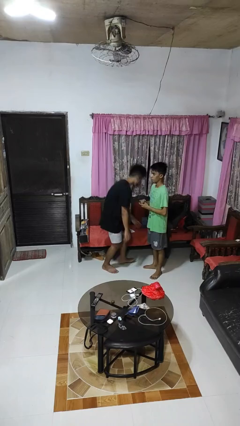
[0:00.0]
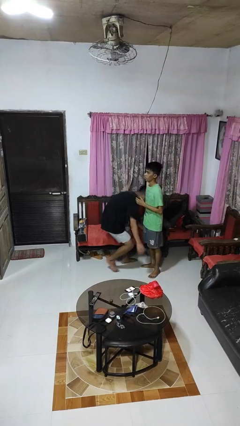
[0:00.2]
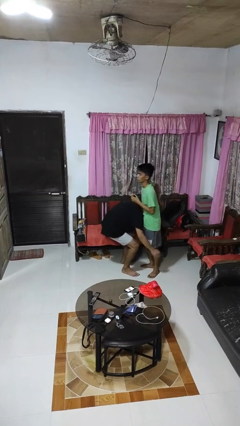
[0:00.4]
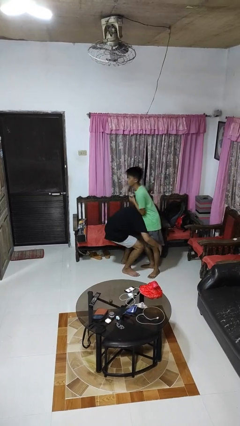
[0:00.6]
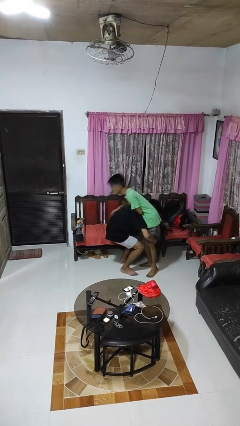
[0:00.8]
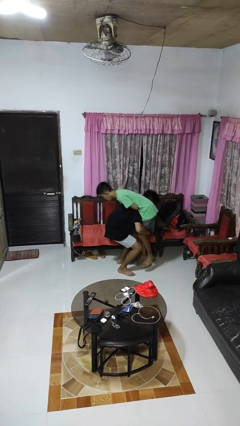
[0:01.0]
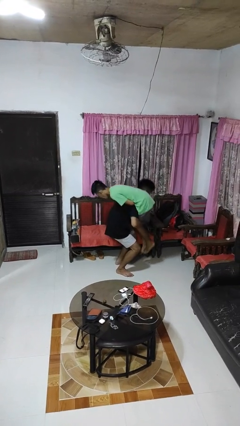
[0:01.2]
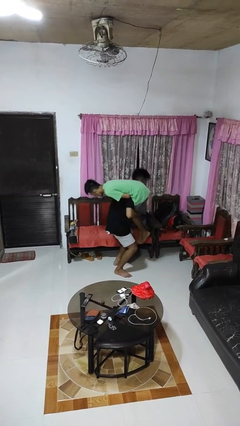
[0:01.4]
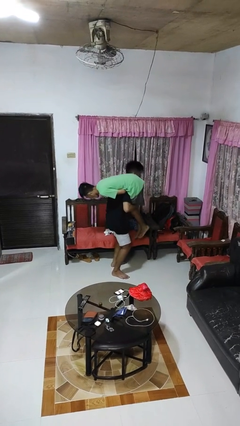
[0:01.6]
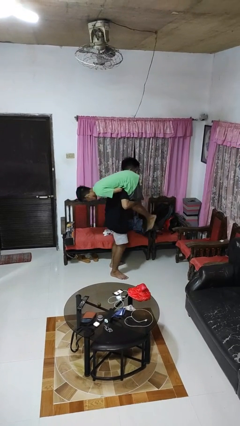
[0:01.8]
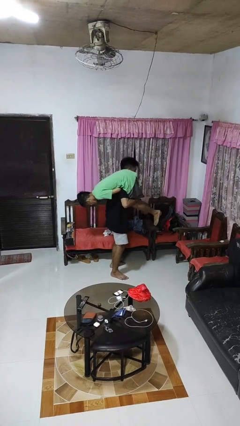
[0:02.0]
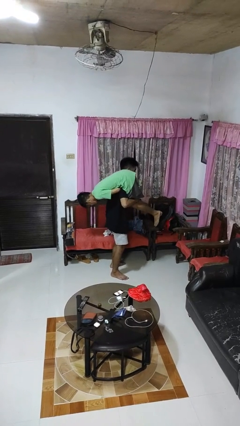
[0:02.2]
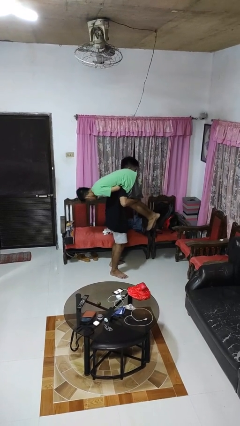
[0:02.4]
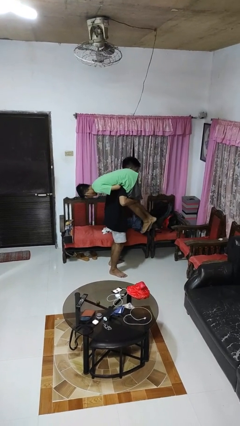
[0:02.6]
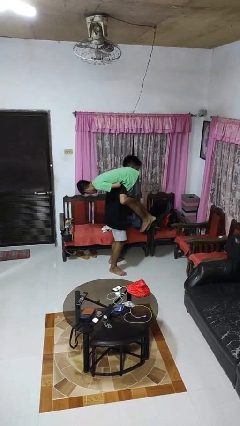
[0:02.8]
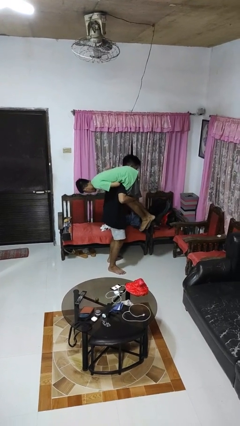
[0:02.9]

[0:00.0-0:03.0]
person carries person over shoulder

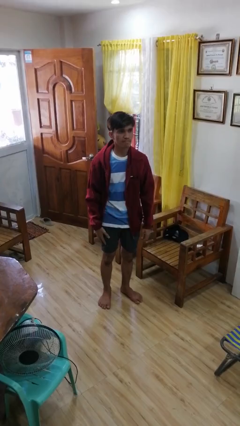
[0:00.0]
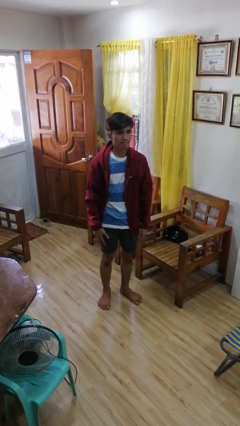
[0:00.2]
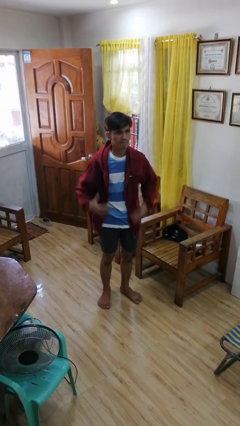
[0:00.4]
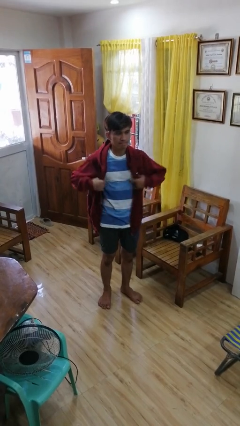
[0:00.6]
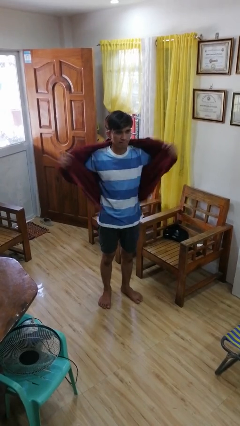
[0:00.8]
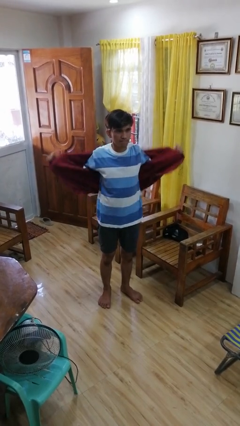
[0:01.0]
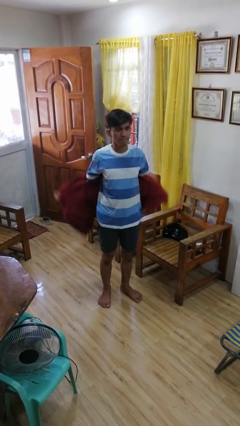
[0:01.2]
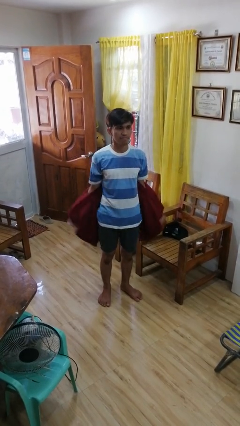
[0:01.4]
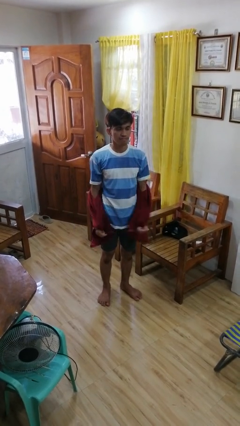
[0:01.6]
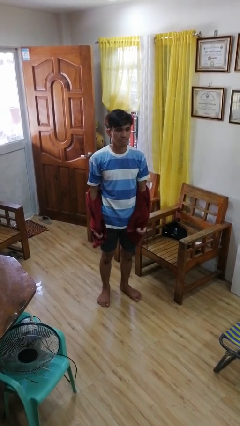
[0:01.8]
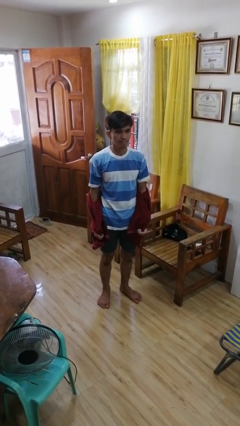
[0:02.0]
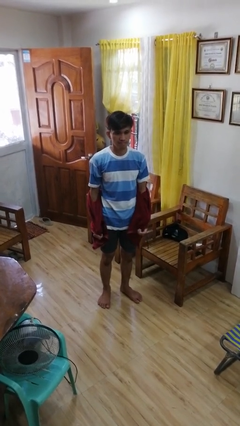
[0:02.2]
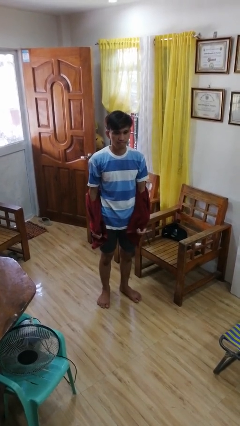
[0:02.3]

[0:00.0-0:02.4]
person takes off jacket

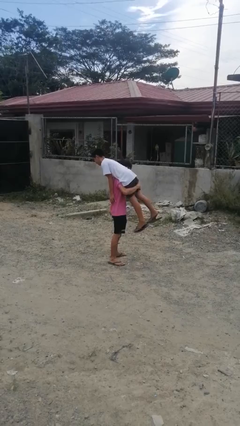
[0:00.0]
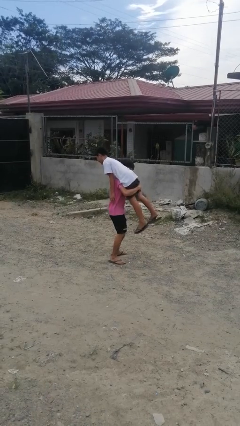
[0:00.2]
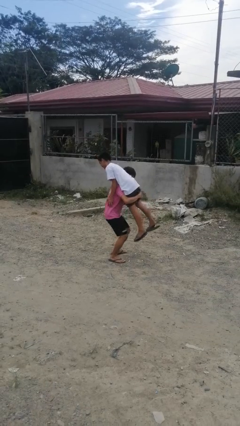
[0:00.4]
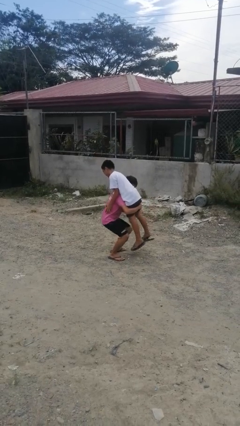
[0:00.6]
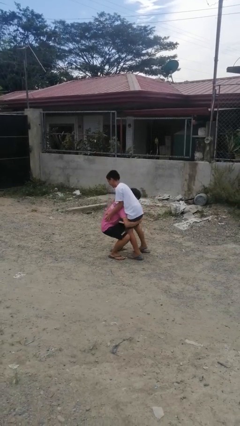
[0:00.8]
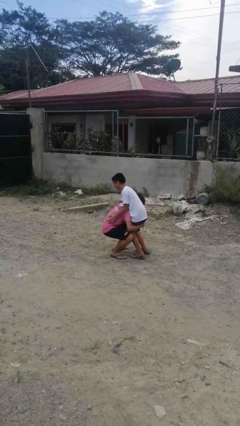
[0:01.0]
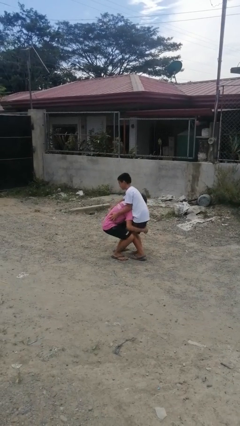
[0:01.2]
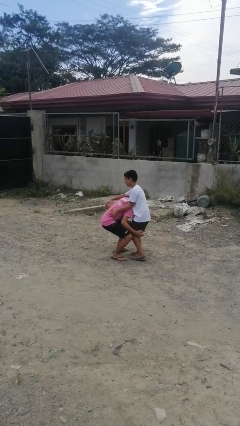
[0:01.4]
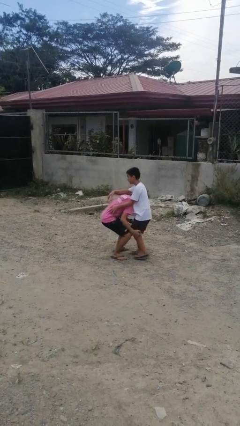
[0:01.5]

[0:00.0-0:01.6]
person puts down person

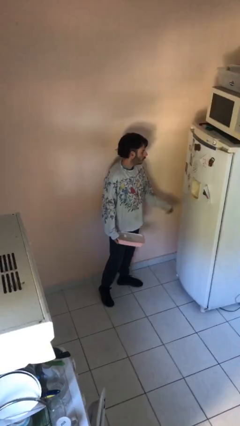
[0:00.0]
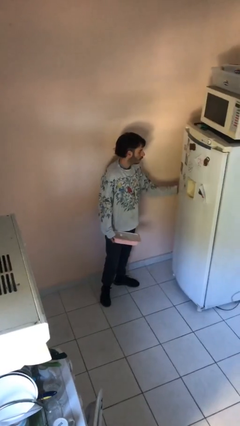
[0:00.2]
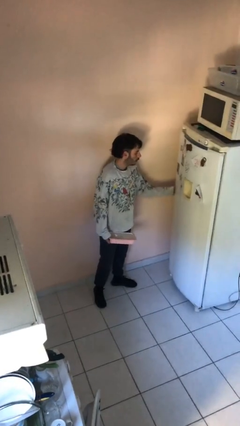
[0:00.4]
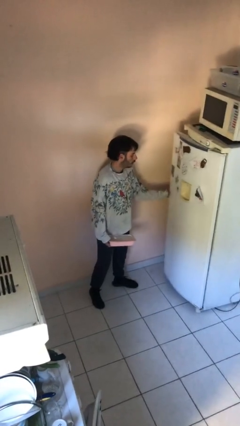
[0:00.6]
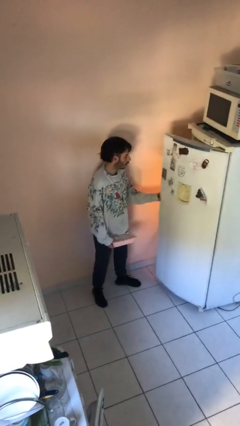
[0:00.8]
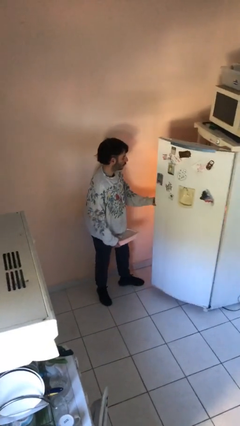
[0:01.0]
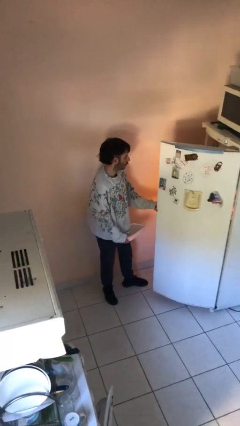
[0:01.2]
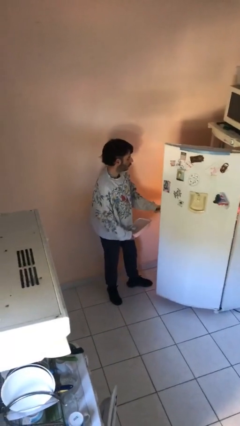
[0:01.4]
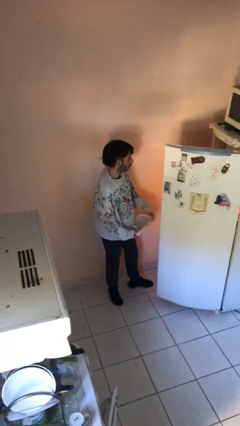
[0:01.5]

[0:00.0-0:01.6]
person opens refrigerator

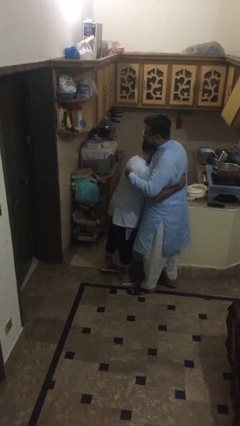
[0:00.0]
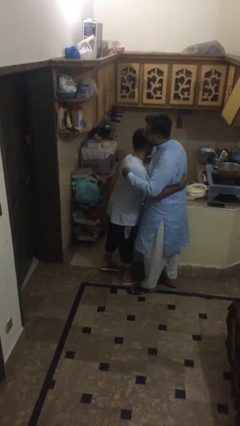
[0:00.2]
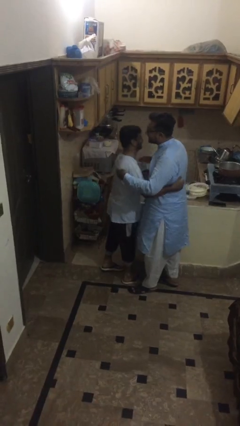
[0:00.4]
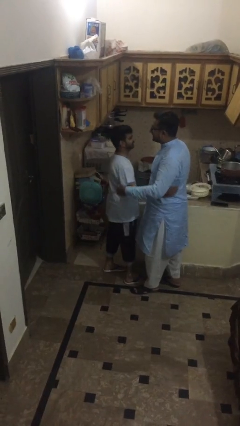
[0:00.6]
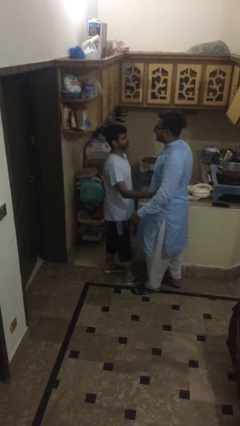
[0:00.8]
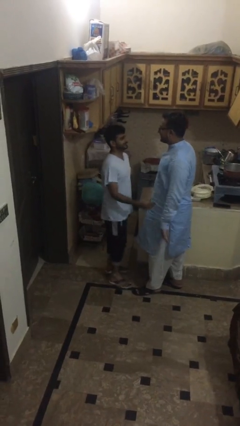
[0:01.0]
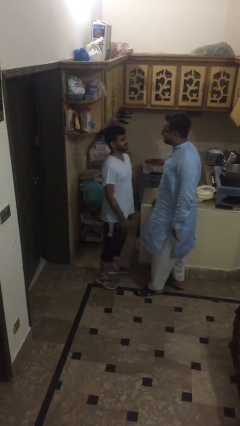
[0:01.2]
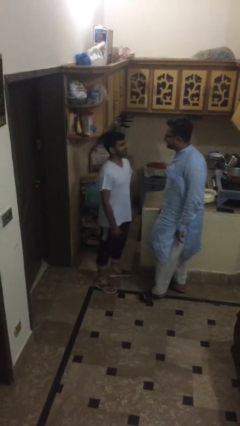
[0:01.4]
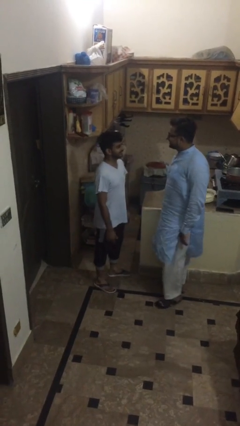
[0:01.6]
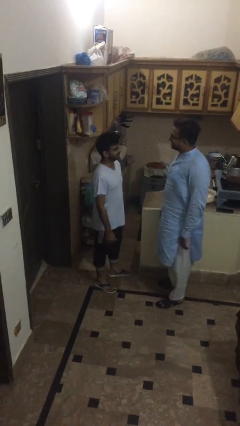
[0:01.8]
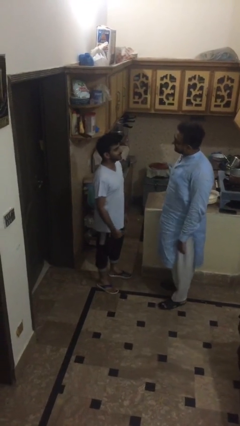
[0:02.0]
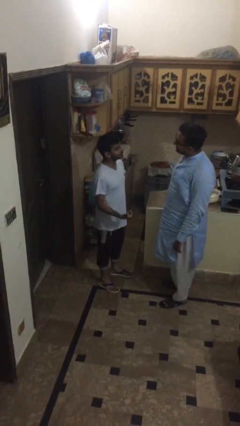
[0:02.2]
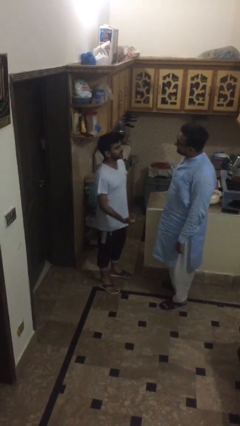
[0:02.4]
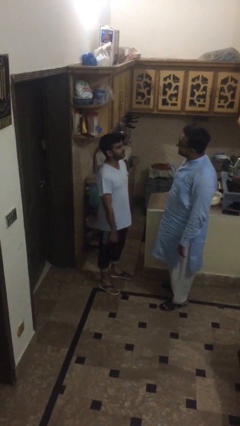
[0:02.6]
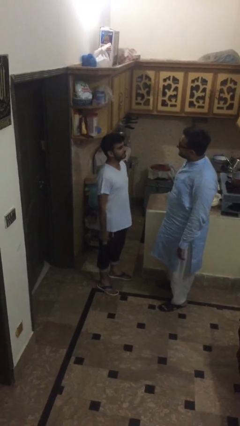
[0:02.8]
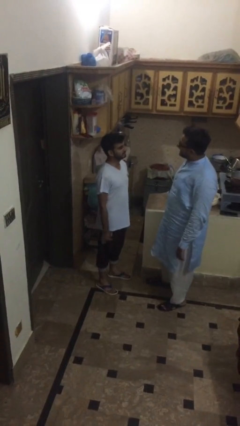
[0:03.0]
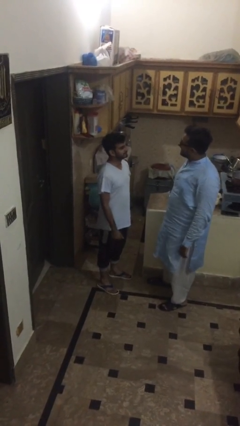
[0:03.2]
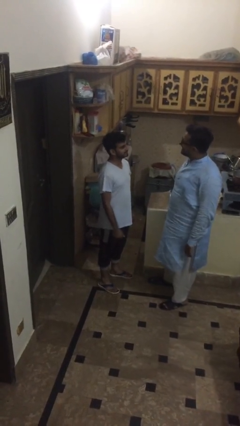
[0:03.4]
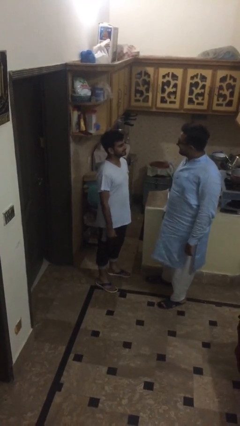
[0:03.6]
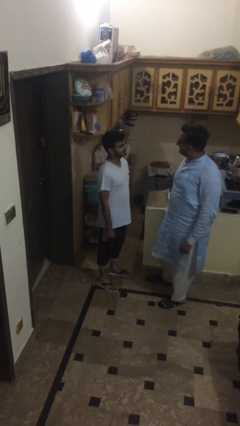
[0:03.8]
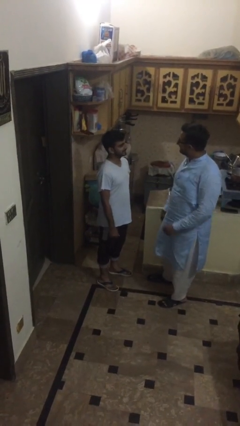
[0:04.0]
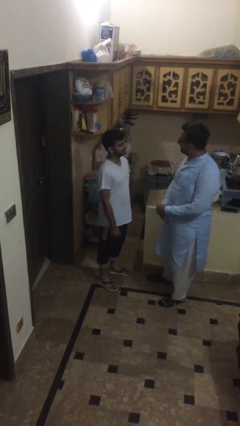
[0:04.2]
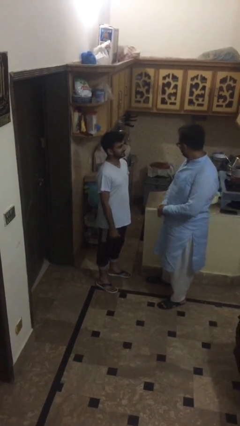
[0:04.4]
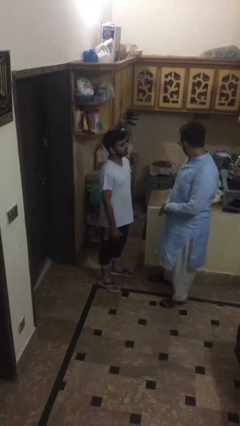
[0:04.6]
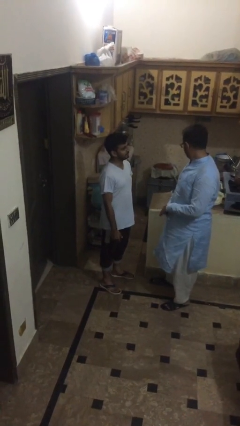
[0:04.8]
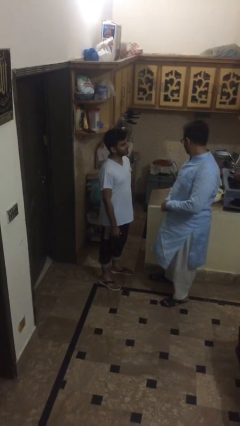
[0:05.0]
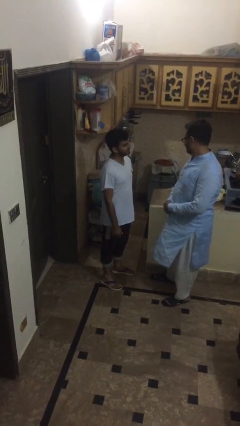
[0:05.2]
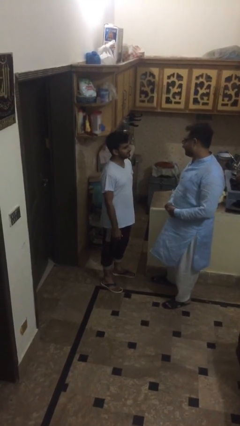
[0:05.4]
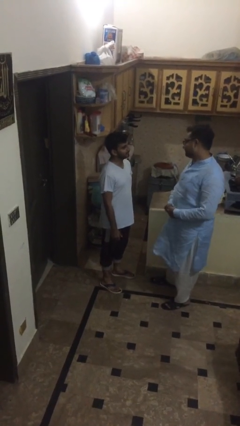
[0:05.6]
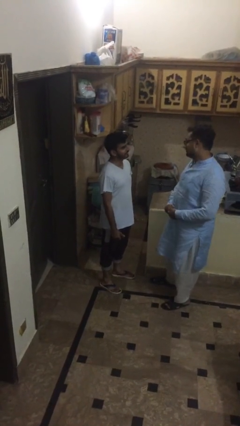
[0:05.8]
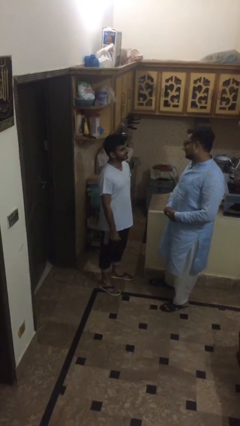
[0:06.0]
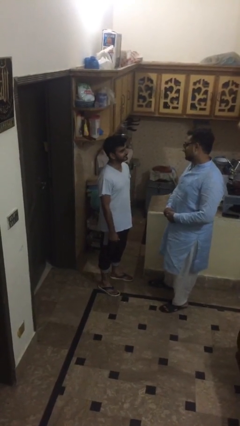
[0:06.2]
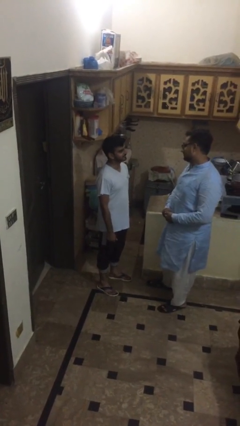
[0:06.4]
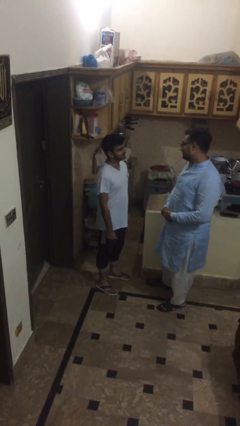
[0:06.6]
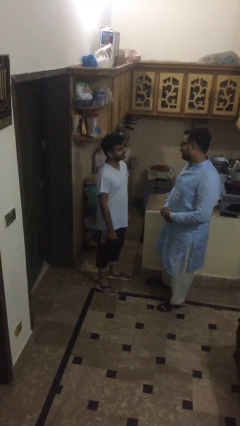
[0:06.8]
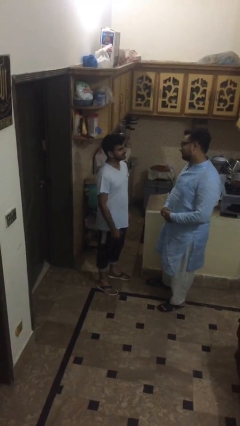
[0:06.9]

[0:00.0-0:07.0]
person talks to person

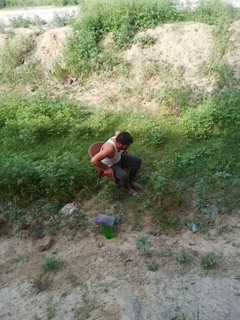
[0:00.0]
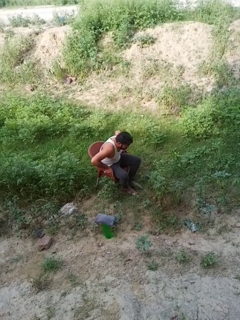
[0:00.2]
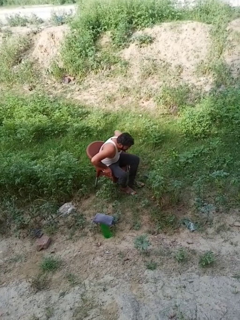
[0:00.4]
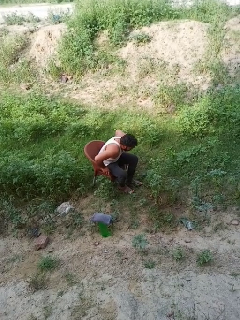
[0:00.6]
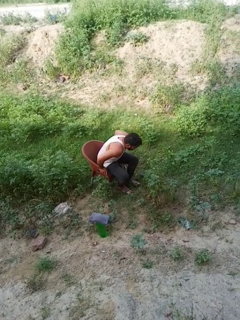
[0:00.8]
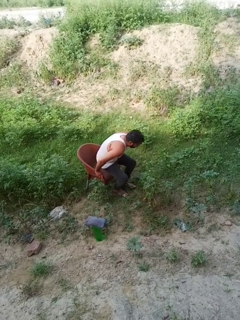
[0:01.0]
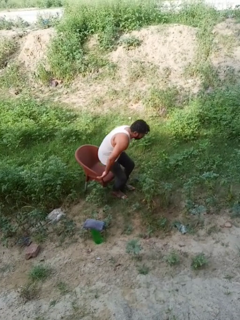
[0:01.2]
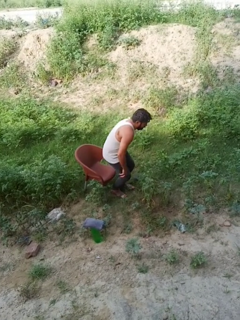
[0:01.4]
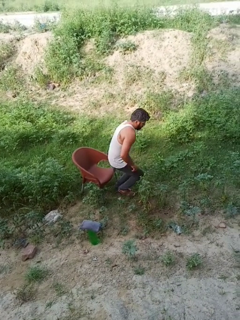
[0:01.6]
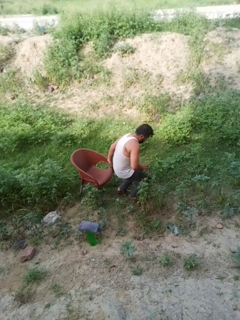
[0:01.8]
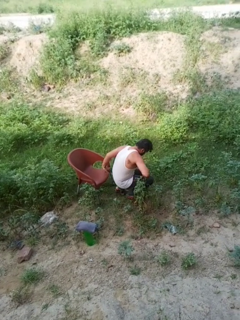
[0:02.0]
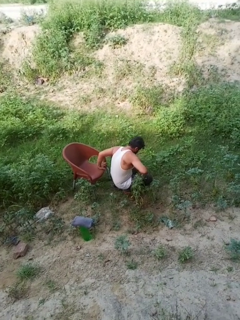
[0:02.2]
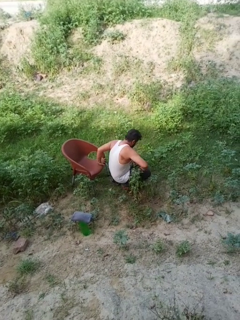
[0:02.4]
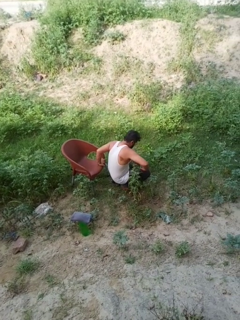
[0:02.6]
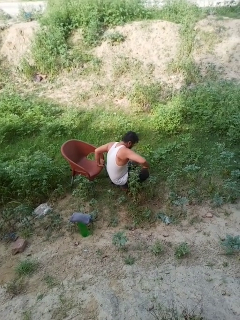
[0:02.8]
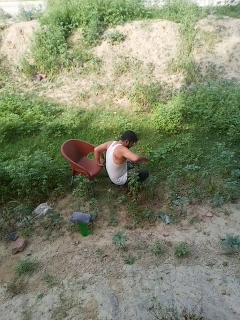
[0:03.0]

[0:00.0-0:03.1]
person falls from chair
